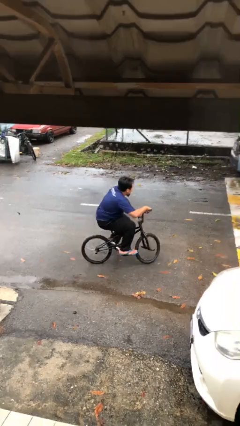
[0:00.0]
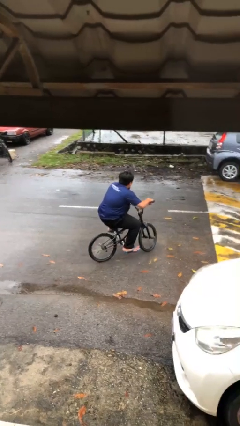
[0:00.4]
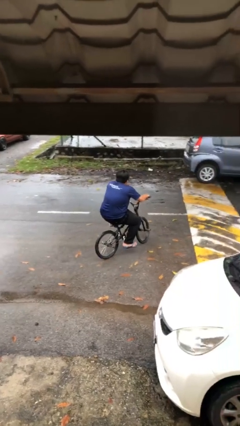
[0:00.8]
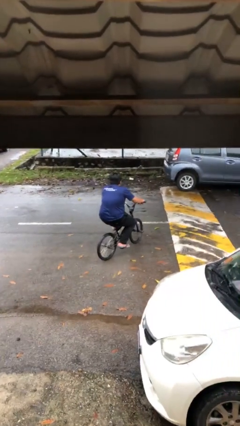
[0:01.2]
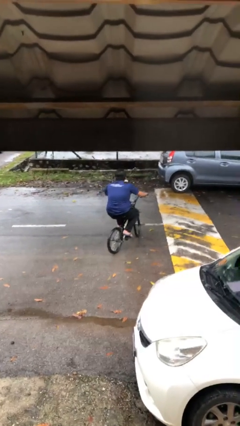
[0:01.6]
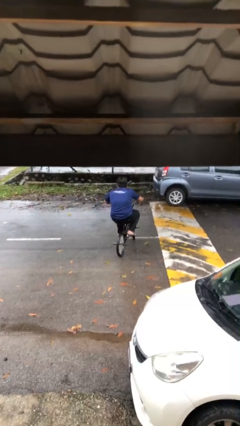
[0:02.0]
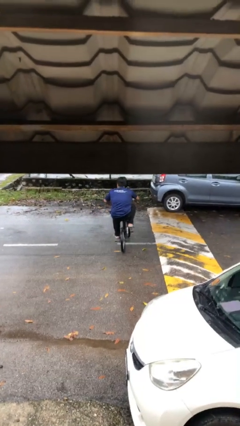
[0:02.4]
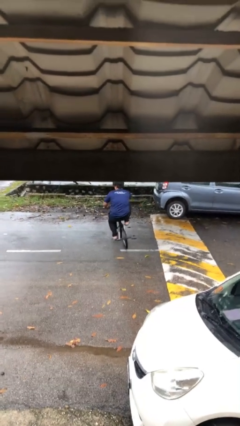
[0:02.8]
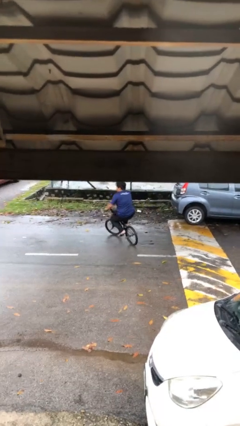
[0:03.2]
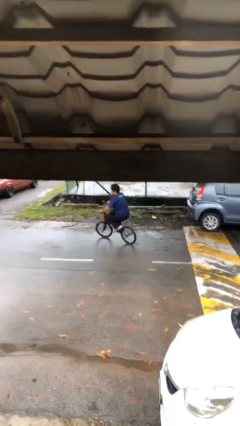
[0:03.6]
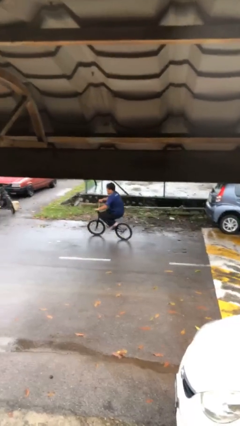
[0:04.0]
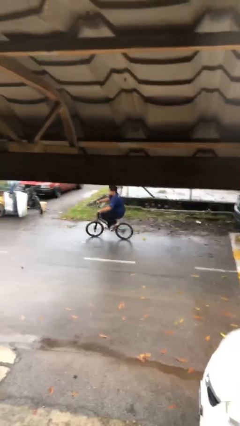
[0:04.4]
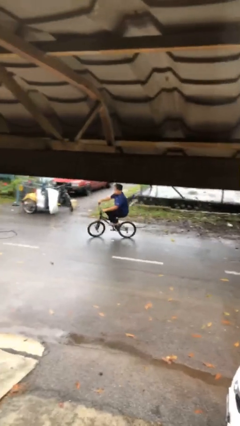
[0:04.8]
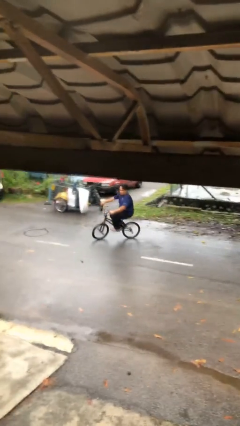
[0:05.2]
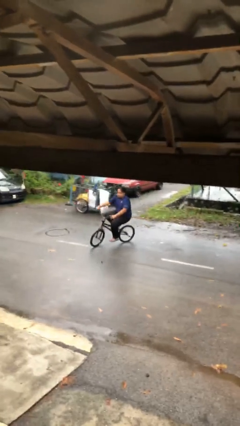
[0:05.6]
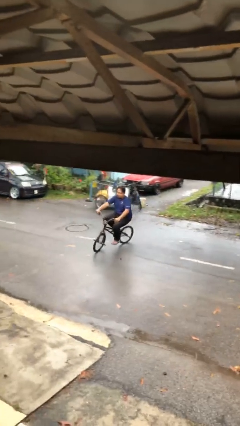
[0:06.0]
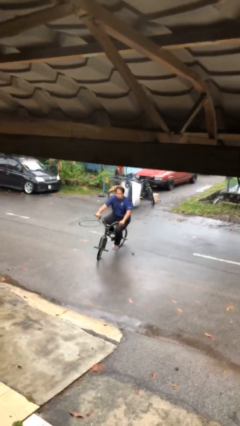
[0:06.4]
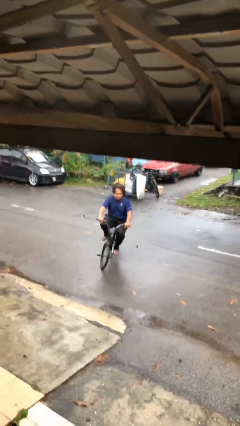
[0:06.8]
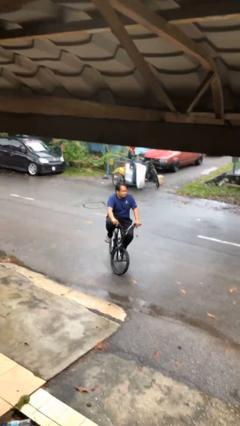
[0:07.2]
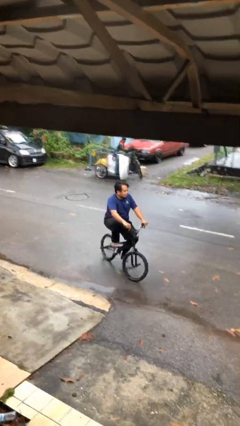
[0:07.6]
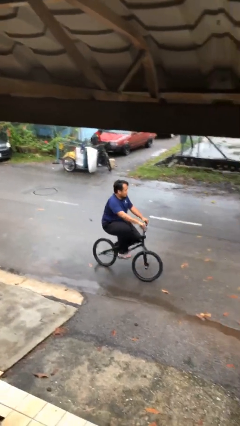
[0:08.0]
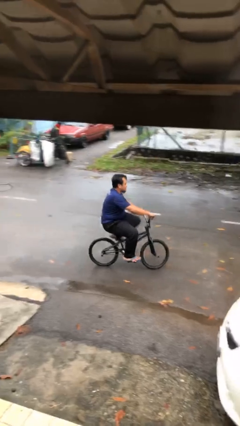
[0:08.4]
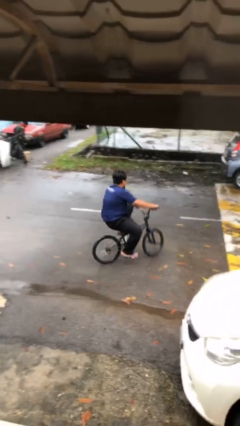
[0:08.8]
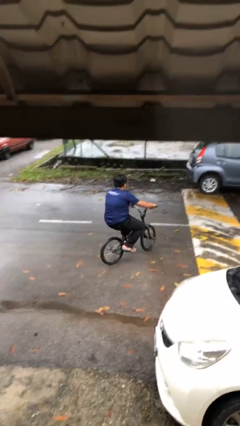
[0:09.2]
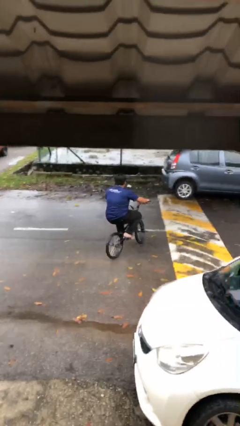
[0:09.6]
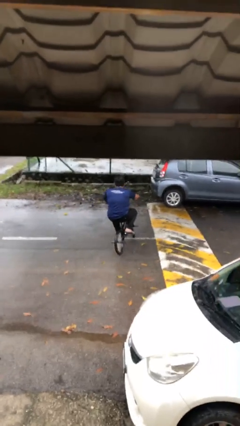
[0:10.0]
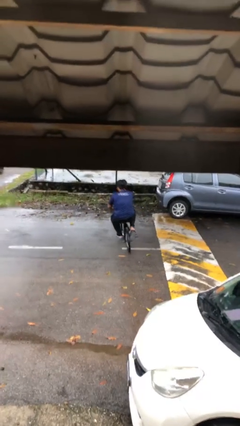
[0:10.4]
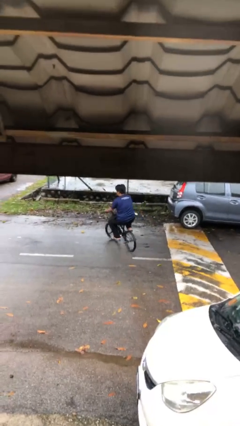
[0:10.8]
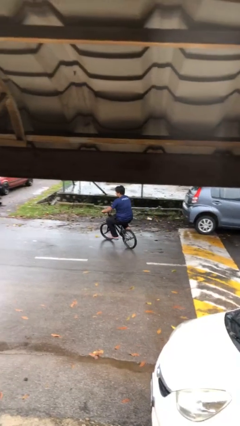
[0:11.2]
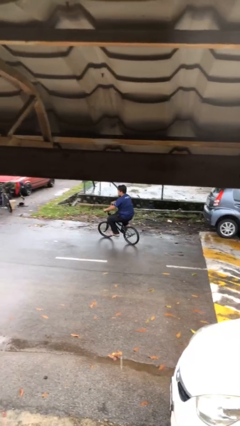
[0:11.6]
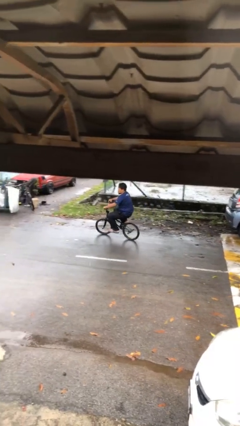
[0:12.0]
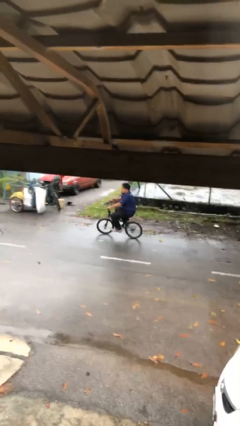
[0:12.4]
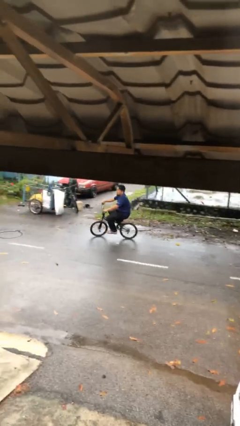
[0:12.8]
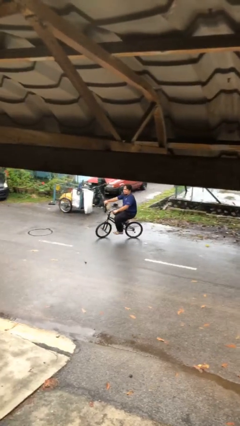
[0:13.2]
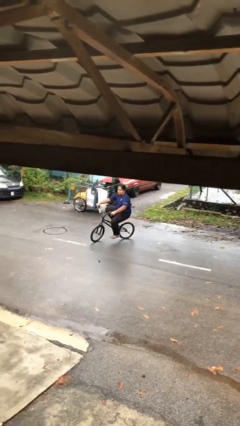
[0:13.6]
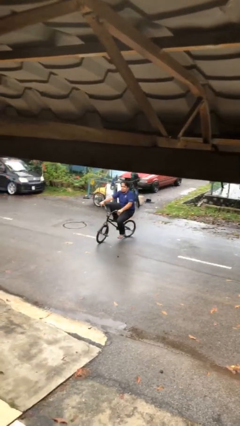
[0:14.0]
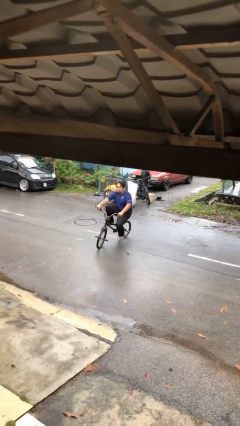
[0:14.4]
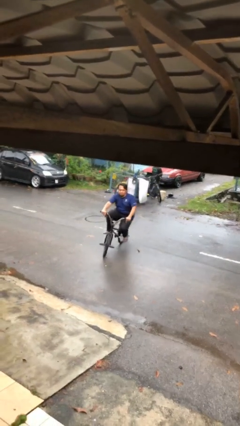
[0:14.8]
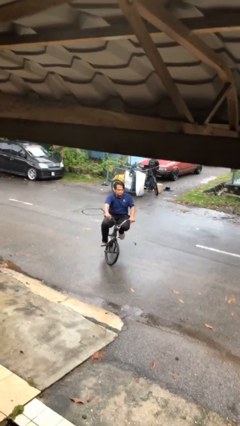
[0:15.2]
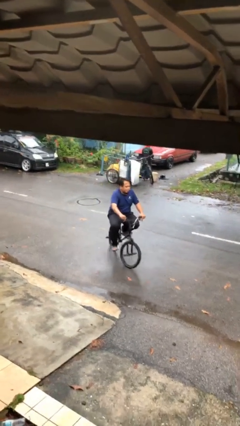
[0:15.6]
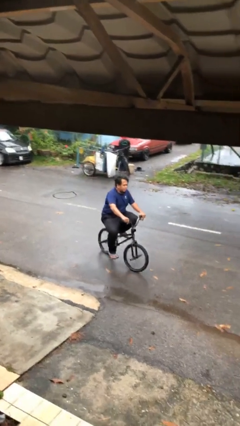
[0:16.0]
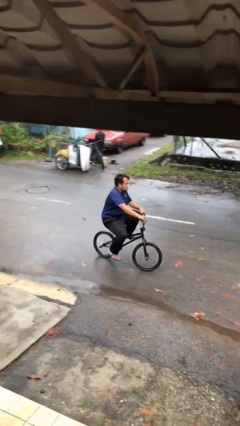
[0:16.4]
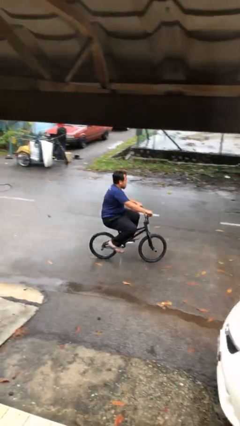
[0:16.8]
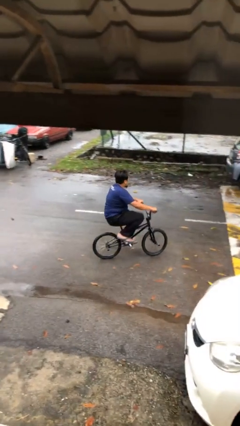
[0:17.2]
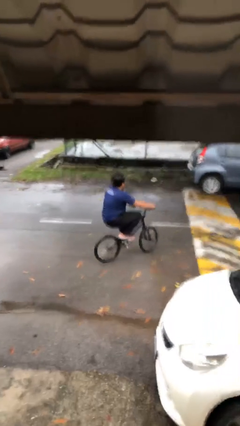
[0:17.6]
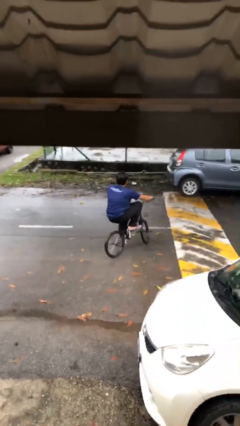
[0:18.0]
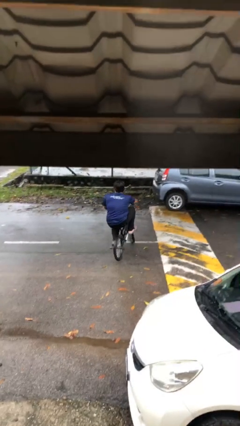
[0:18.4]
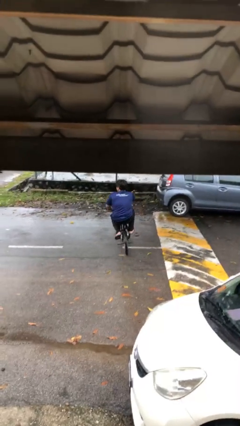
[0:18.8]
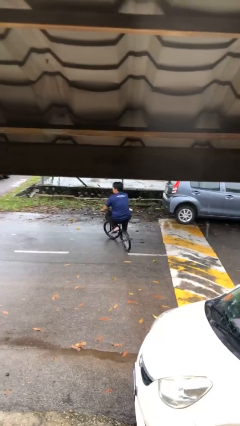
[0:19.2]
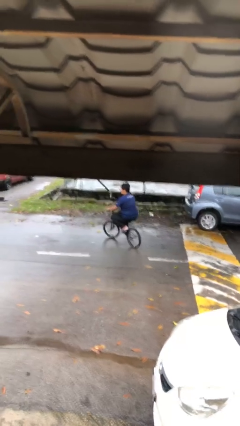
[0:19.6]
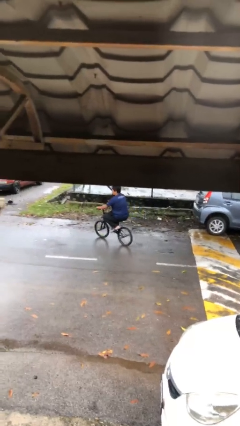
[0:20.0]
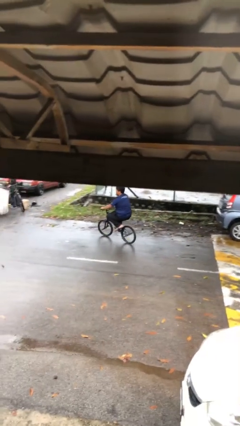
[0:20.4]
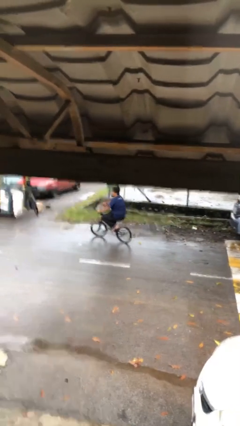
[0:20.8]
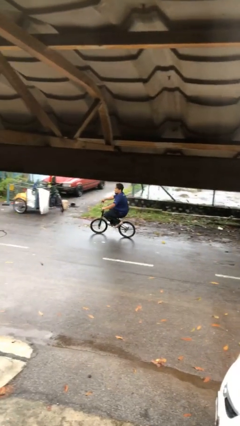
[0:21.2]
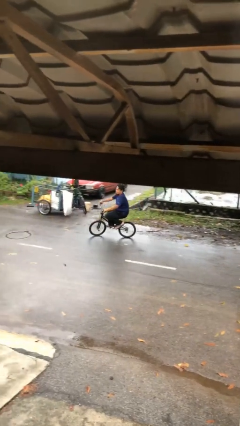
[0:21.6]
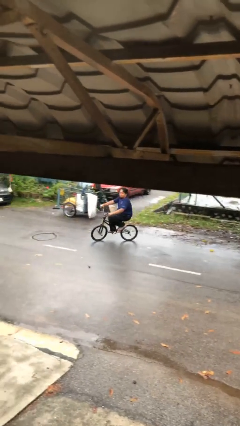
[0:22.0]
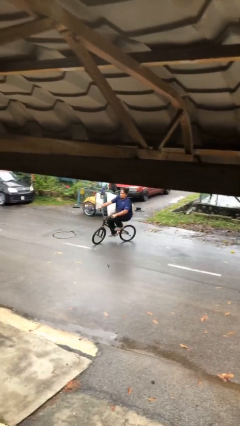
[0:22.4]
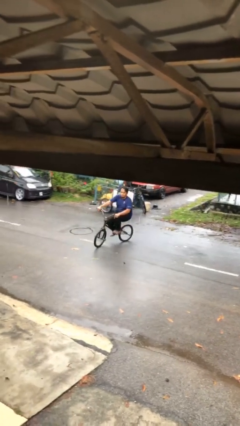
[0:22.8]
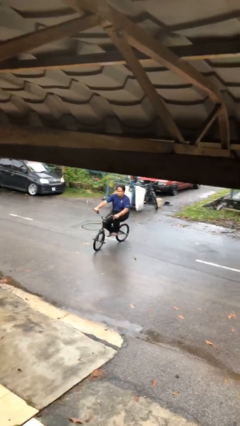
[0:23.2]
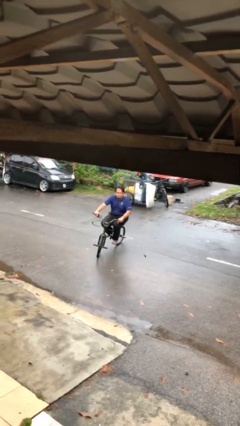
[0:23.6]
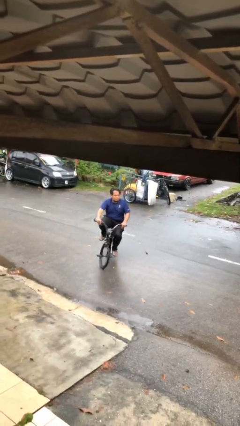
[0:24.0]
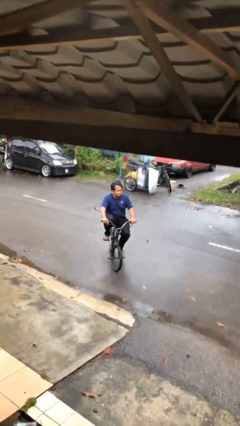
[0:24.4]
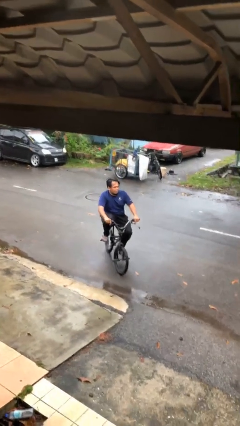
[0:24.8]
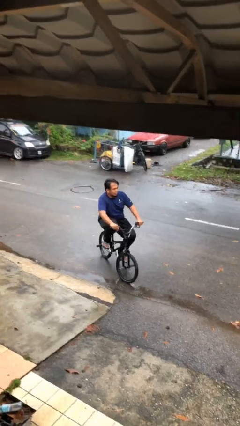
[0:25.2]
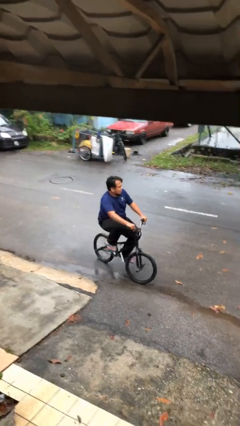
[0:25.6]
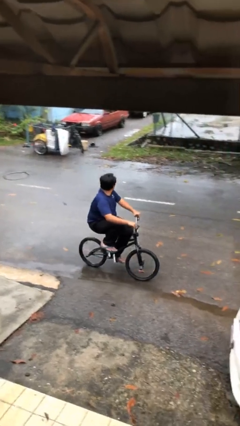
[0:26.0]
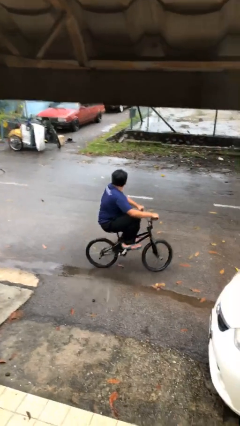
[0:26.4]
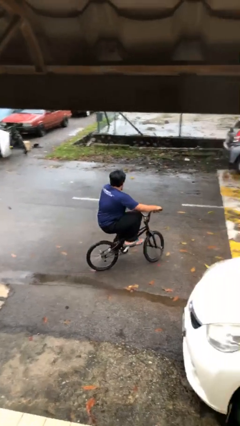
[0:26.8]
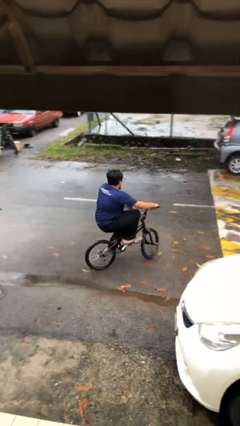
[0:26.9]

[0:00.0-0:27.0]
person rides bicycle

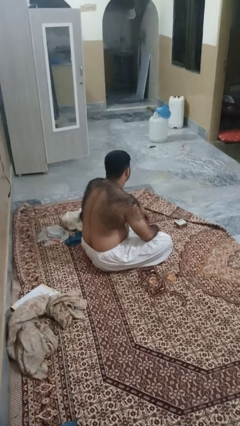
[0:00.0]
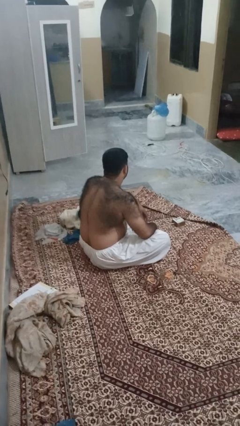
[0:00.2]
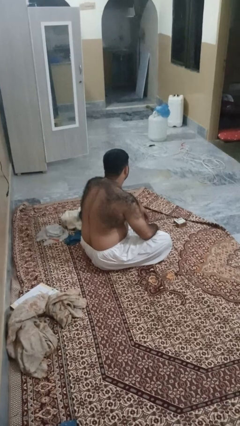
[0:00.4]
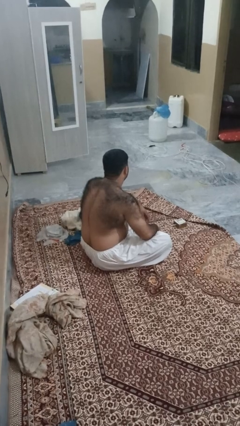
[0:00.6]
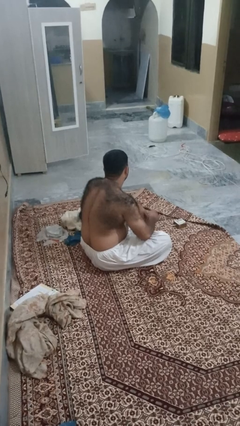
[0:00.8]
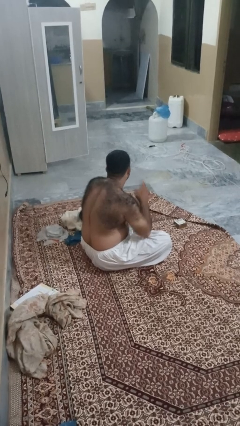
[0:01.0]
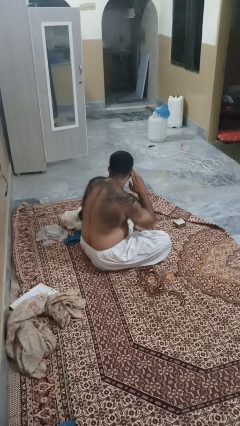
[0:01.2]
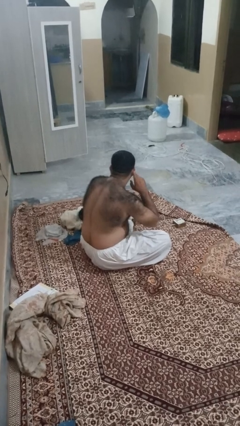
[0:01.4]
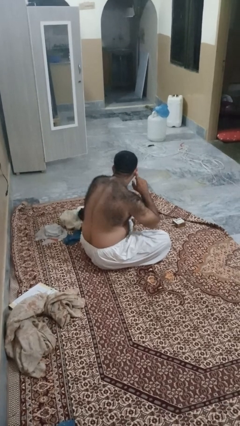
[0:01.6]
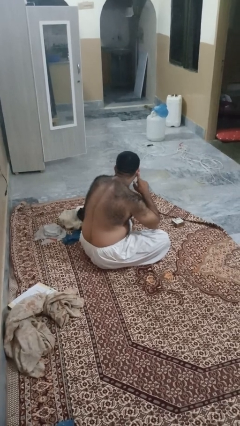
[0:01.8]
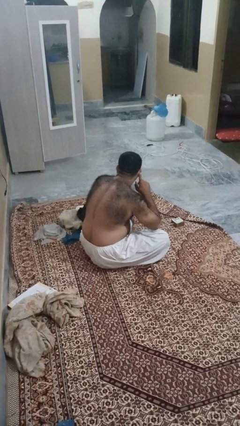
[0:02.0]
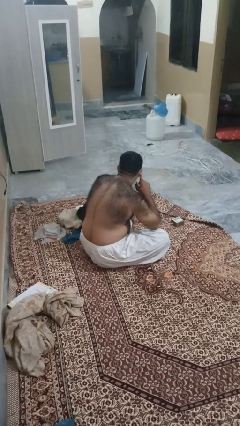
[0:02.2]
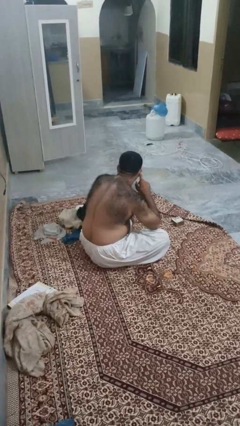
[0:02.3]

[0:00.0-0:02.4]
person gestures listen closely

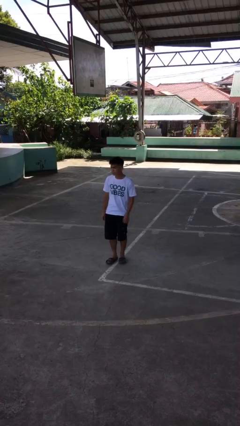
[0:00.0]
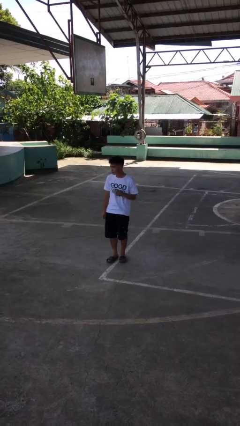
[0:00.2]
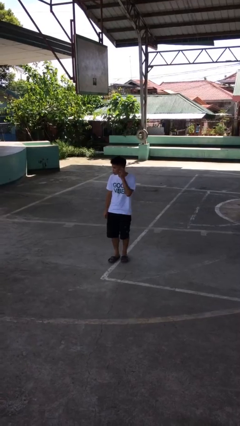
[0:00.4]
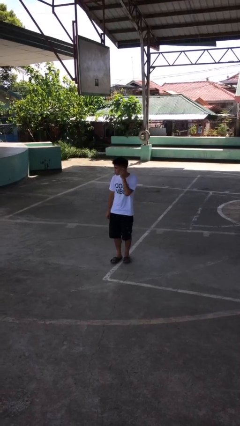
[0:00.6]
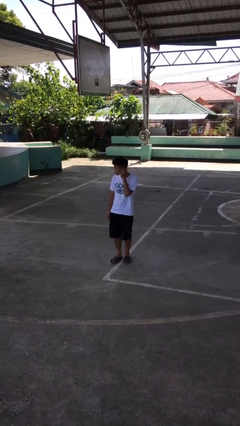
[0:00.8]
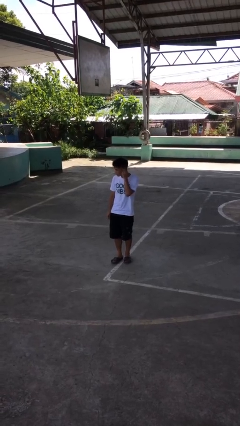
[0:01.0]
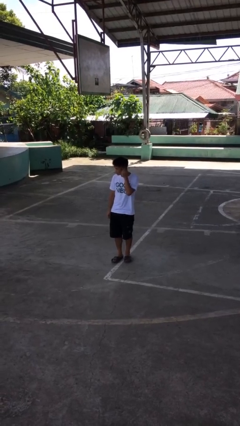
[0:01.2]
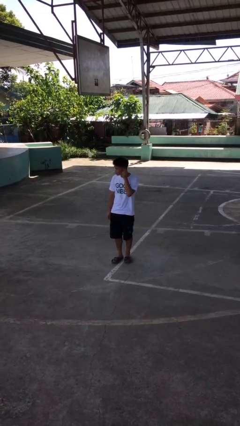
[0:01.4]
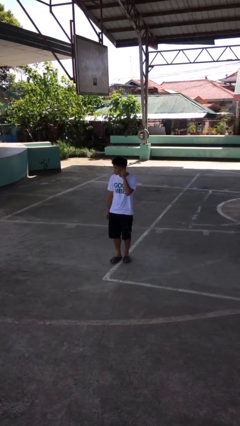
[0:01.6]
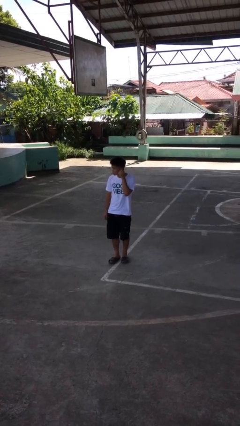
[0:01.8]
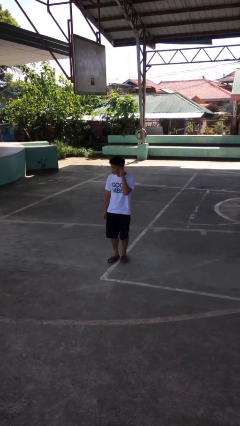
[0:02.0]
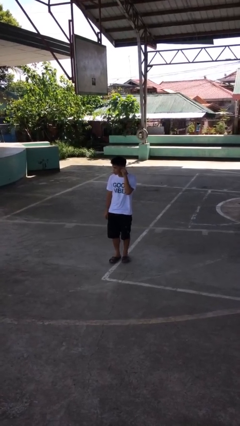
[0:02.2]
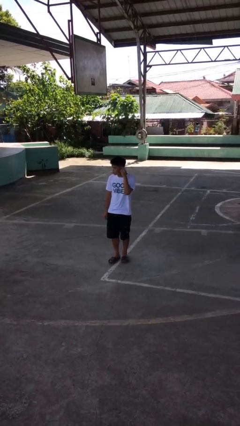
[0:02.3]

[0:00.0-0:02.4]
person touches earlobe
